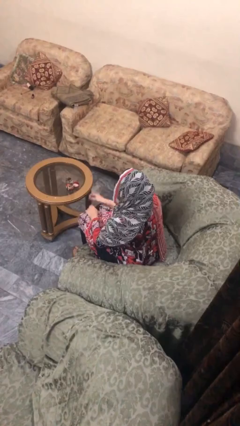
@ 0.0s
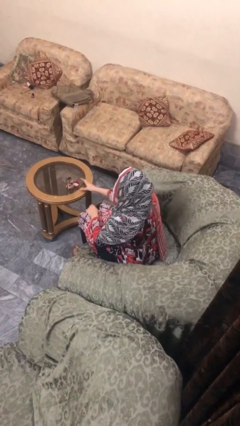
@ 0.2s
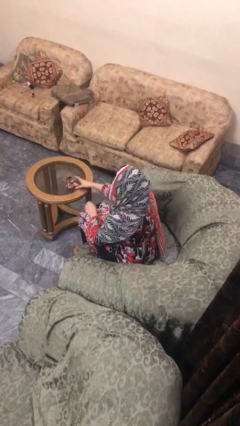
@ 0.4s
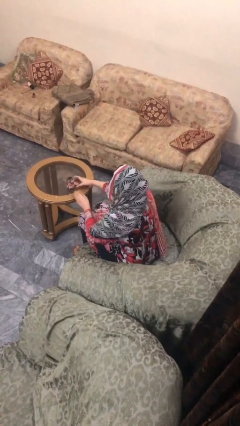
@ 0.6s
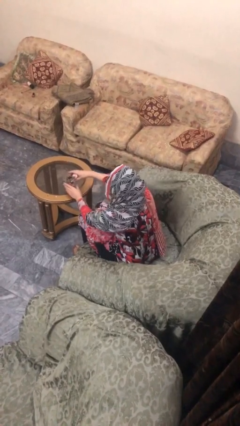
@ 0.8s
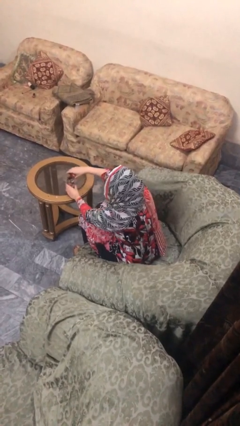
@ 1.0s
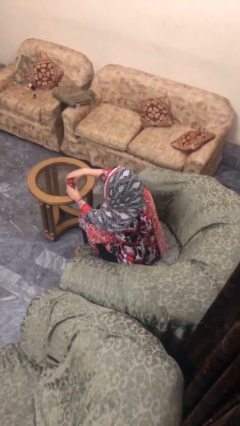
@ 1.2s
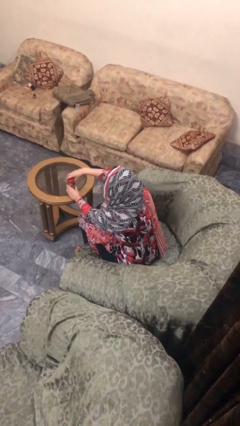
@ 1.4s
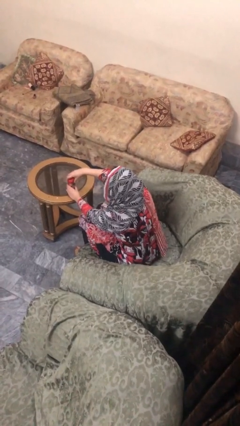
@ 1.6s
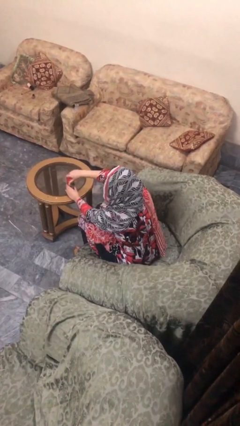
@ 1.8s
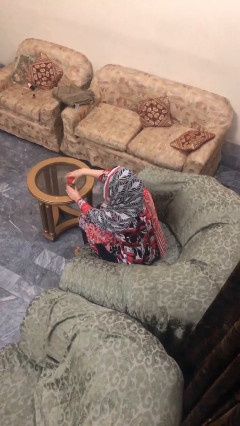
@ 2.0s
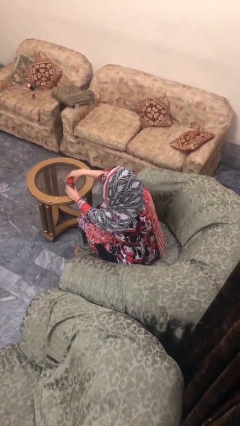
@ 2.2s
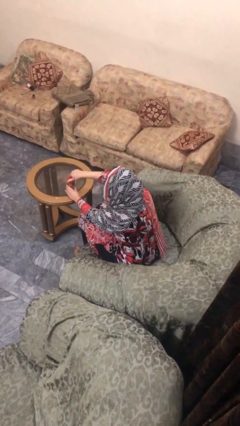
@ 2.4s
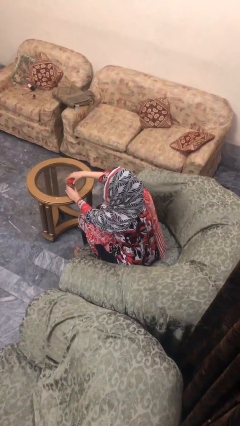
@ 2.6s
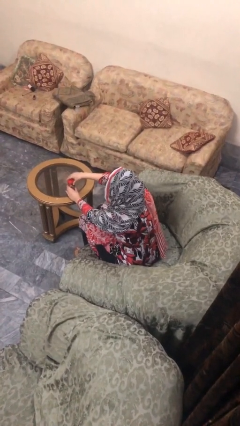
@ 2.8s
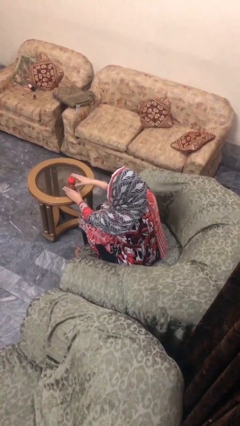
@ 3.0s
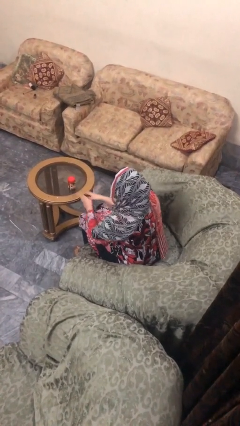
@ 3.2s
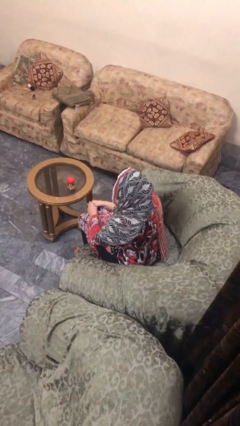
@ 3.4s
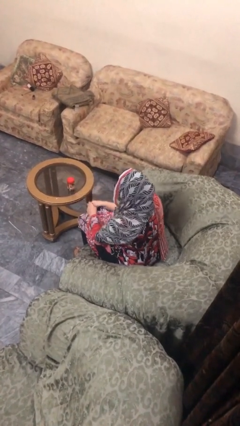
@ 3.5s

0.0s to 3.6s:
person closes jar

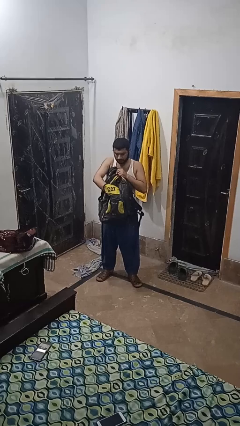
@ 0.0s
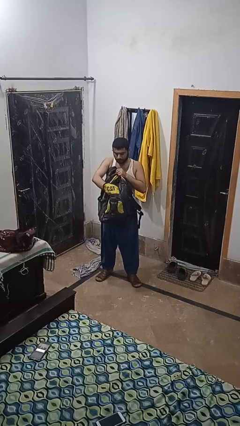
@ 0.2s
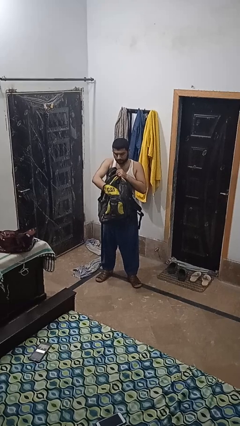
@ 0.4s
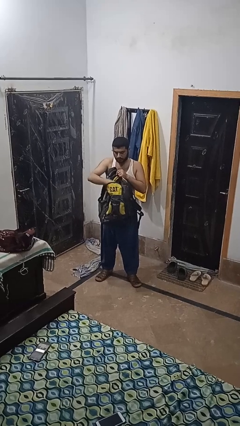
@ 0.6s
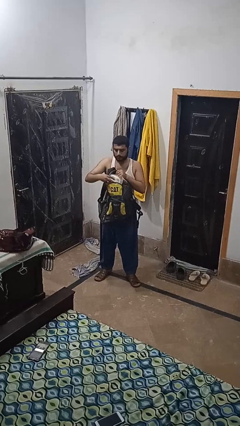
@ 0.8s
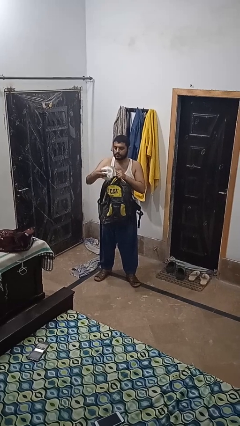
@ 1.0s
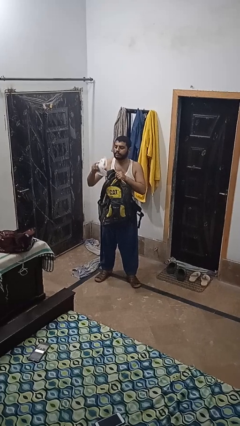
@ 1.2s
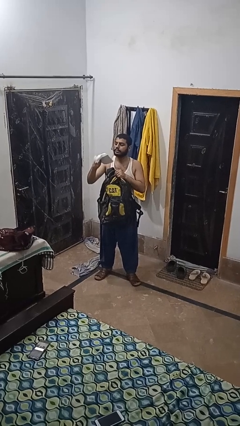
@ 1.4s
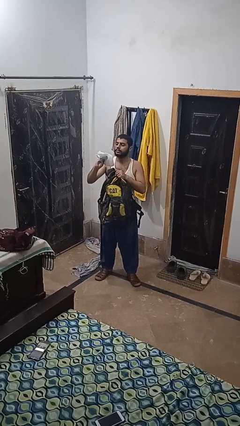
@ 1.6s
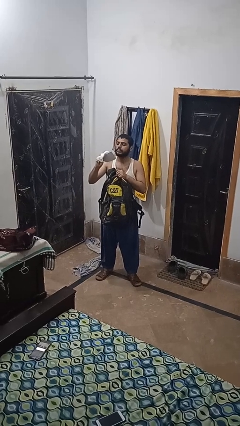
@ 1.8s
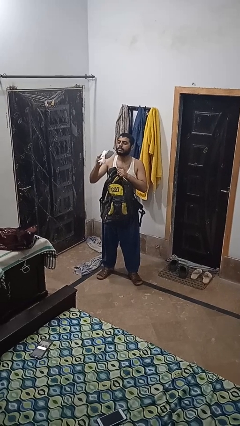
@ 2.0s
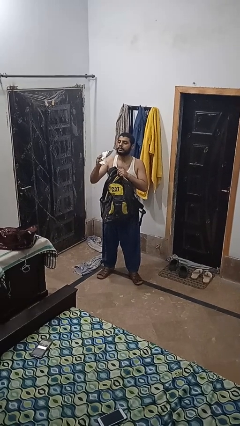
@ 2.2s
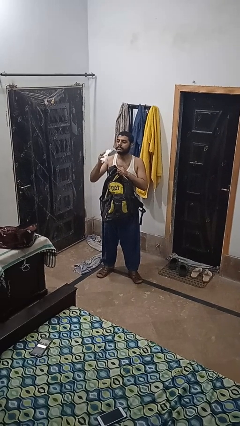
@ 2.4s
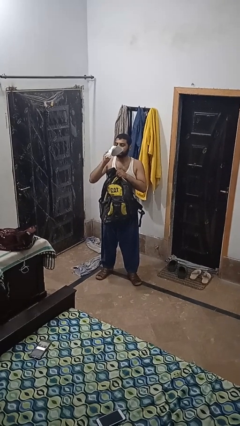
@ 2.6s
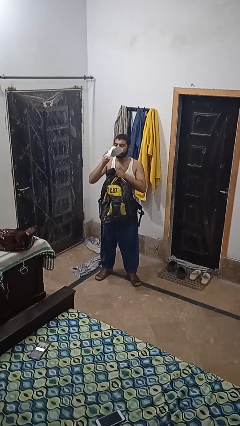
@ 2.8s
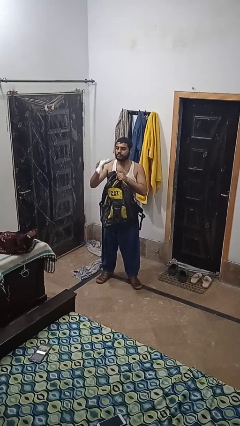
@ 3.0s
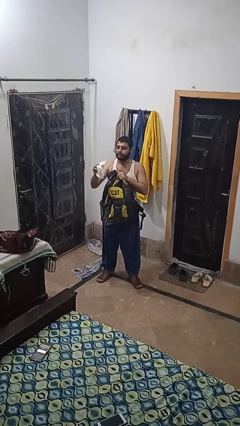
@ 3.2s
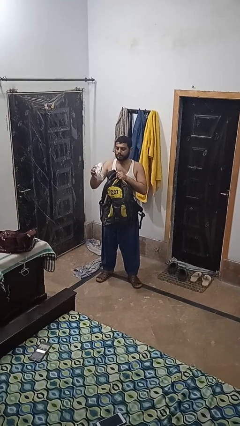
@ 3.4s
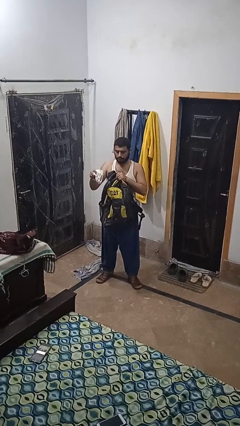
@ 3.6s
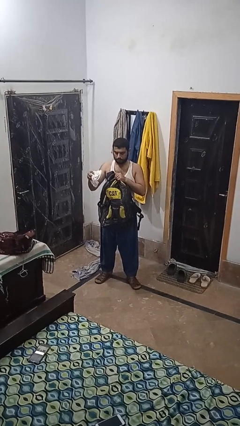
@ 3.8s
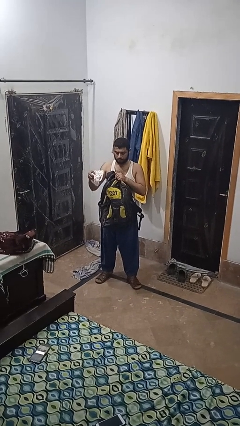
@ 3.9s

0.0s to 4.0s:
person takes object from backpack

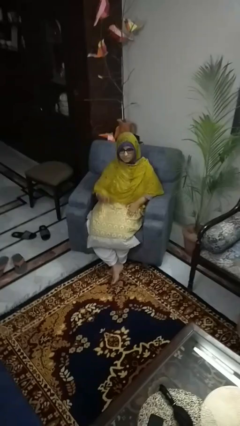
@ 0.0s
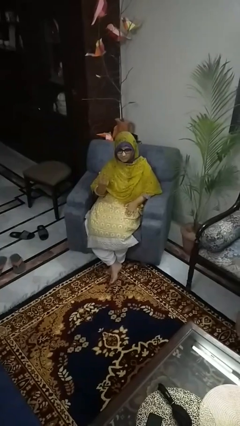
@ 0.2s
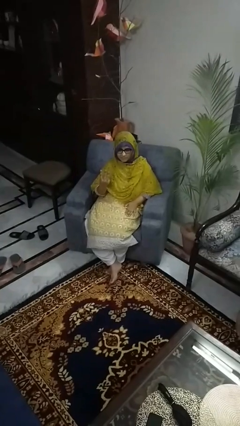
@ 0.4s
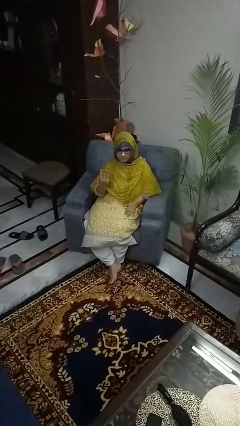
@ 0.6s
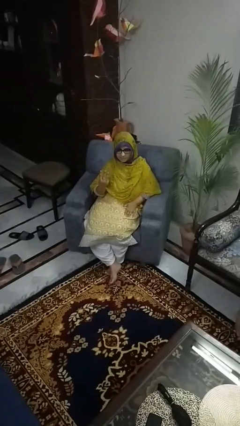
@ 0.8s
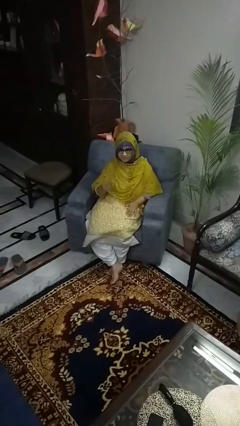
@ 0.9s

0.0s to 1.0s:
person gestures number three

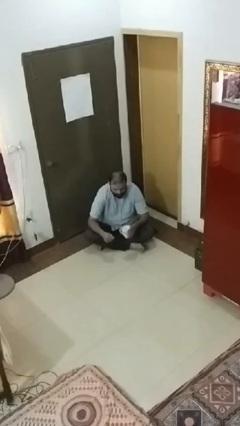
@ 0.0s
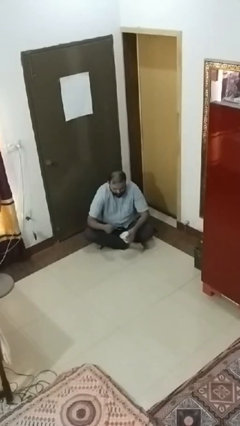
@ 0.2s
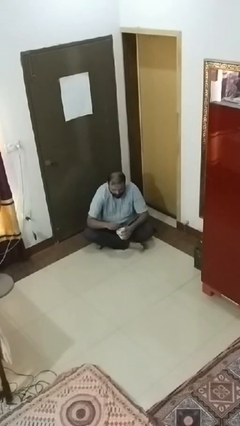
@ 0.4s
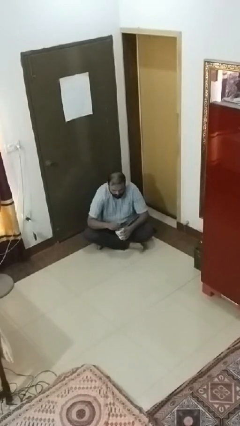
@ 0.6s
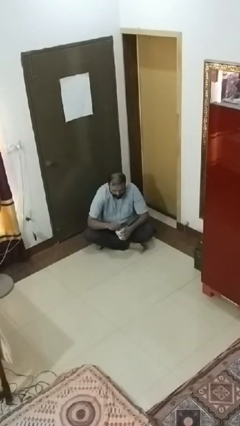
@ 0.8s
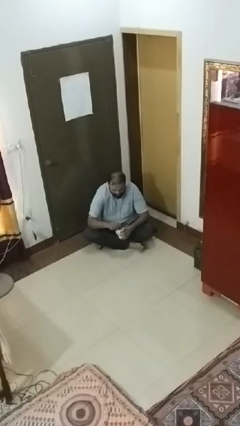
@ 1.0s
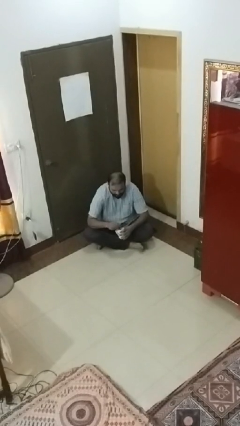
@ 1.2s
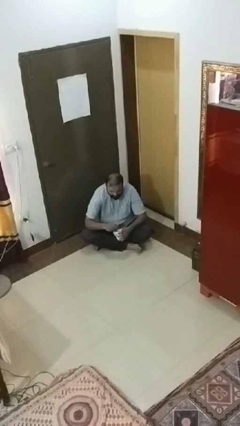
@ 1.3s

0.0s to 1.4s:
person stirs mug

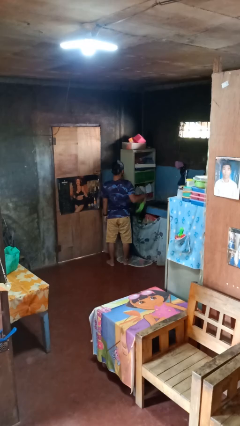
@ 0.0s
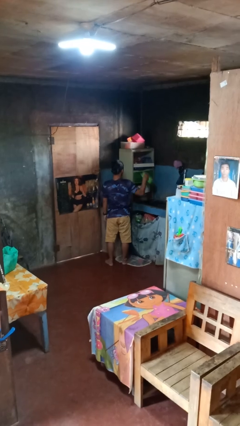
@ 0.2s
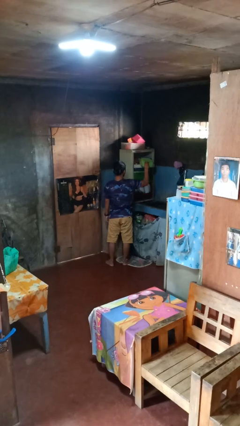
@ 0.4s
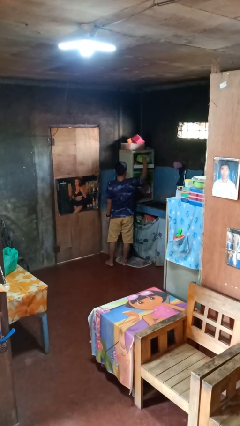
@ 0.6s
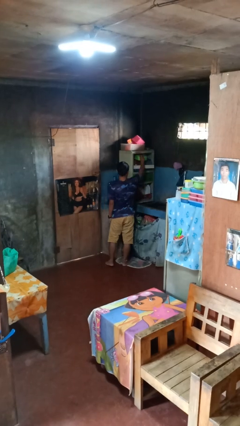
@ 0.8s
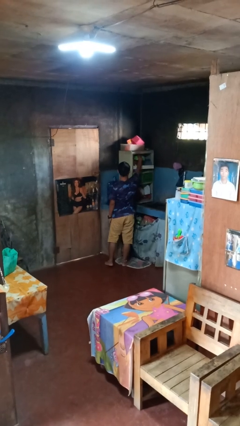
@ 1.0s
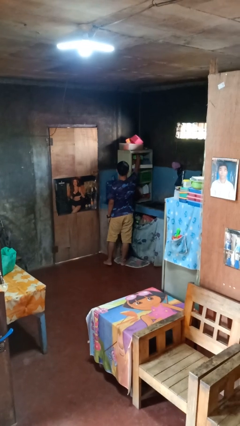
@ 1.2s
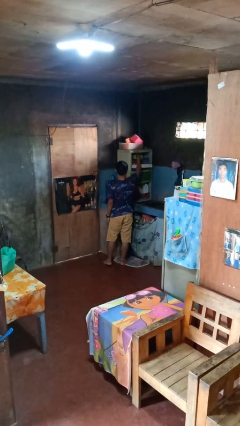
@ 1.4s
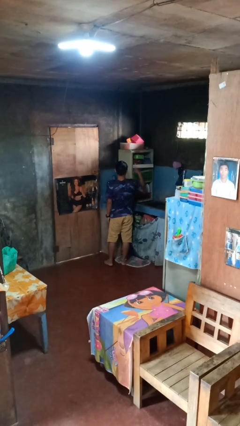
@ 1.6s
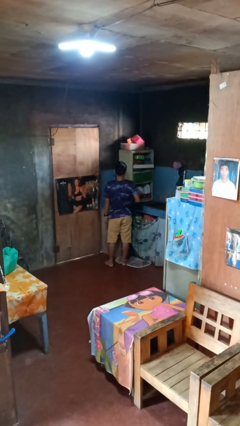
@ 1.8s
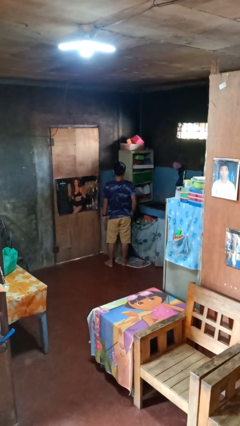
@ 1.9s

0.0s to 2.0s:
person puts object in cabinet

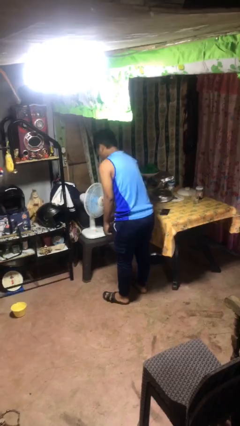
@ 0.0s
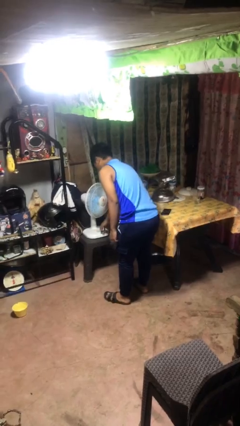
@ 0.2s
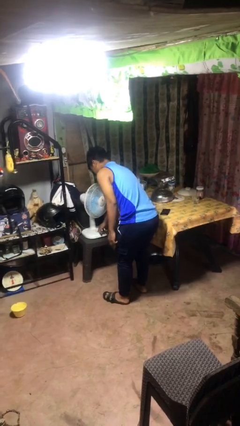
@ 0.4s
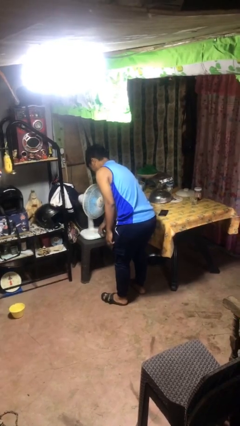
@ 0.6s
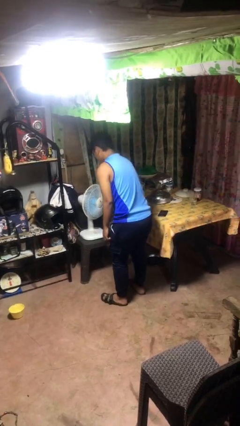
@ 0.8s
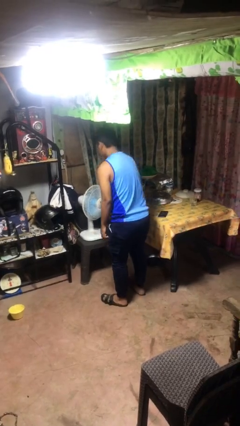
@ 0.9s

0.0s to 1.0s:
person turns on fan

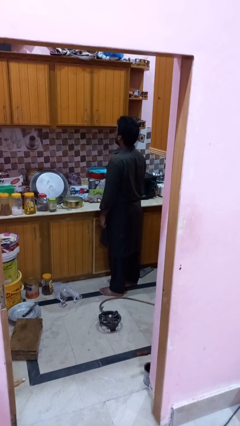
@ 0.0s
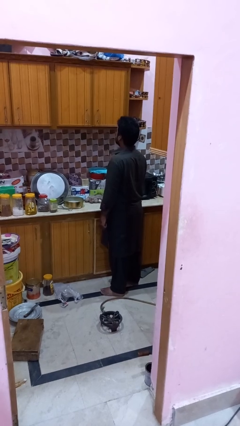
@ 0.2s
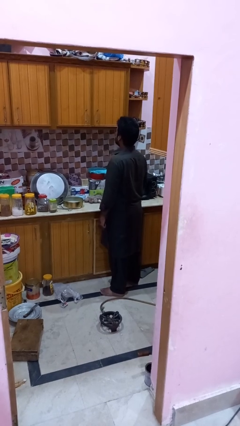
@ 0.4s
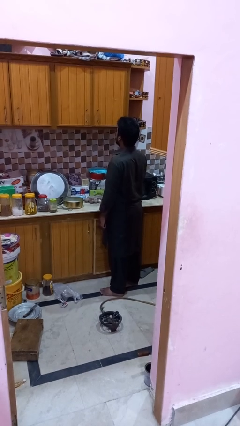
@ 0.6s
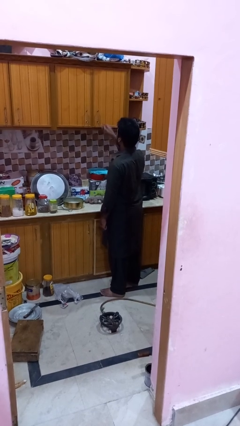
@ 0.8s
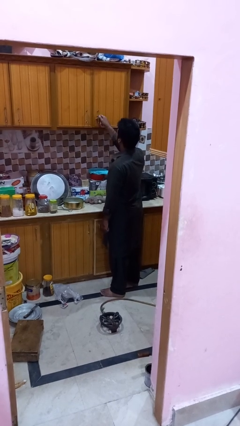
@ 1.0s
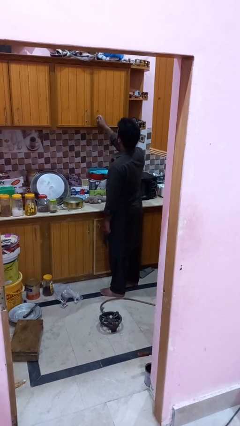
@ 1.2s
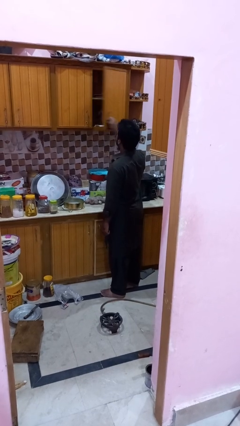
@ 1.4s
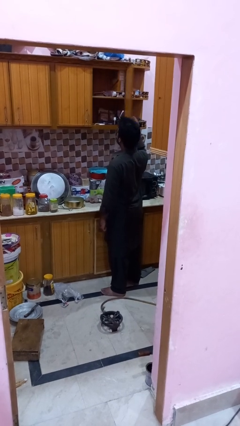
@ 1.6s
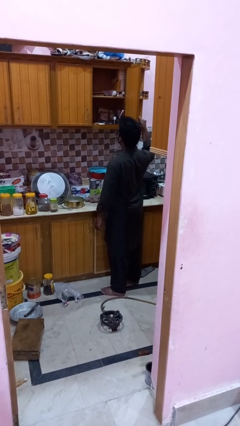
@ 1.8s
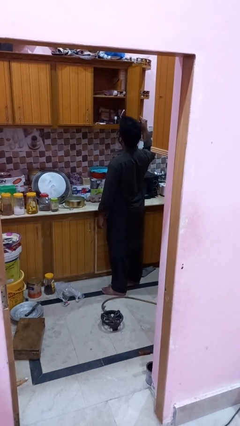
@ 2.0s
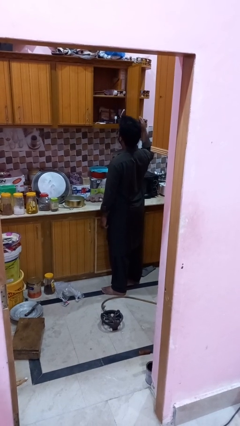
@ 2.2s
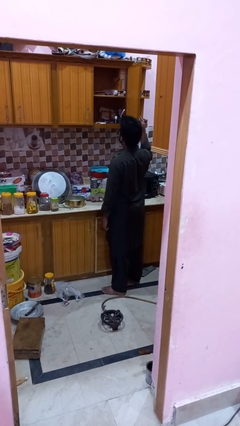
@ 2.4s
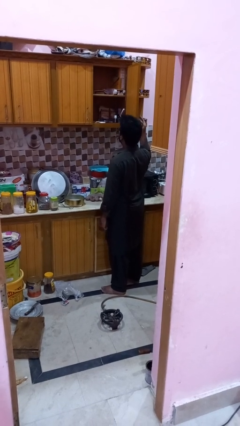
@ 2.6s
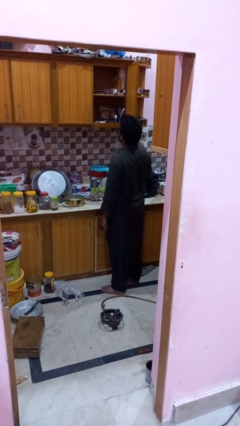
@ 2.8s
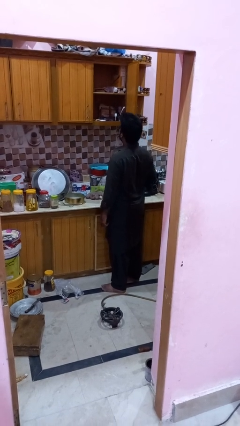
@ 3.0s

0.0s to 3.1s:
person opens cabinet

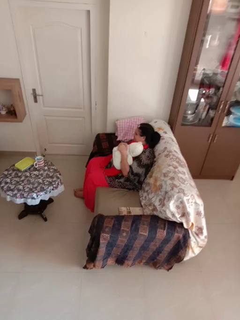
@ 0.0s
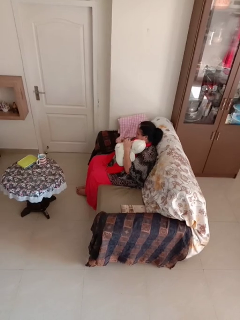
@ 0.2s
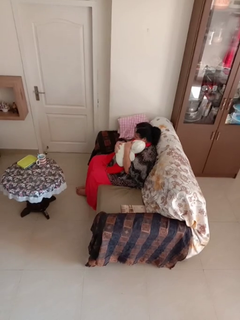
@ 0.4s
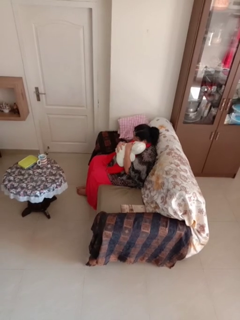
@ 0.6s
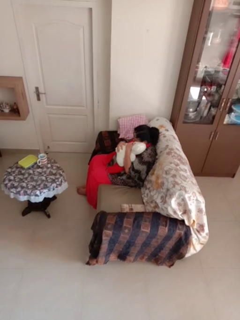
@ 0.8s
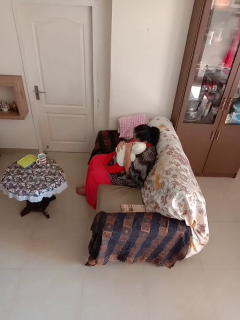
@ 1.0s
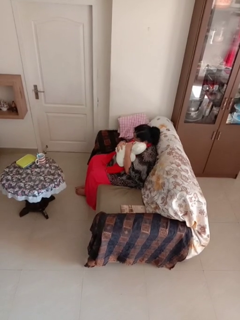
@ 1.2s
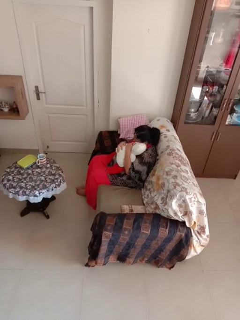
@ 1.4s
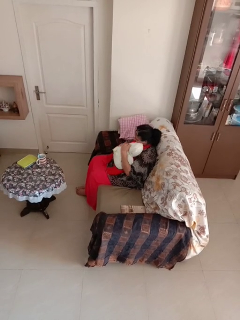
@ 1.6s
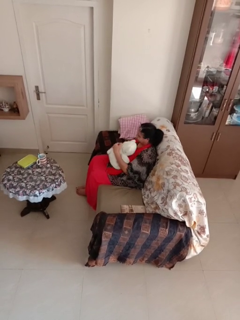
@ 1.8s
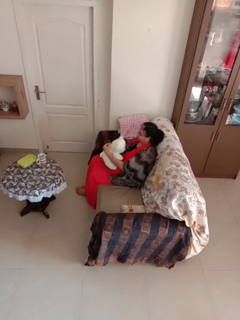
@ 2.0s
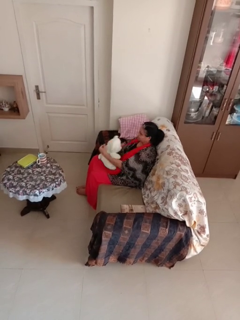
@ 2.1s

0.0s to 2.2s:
person hugs stuffed animal
